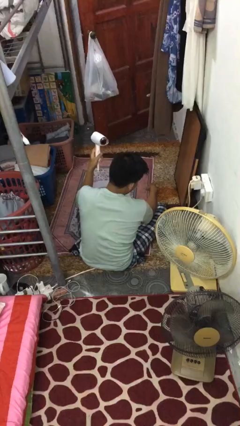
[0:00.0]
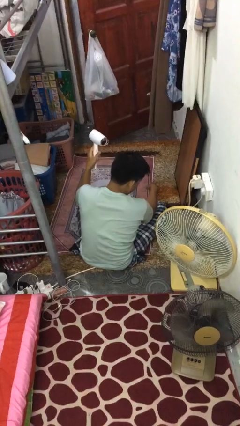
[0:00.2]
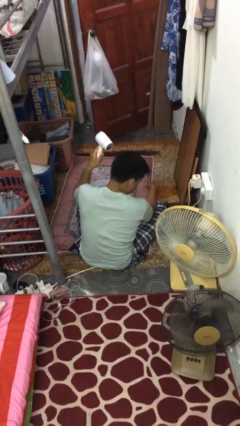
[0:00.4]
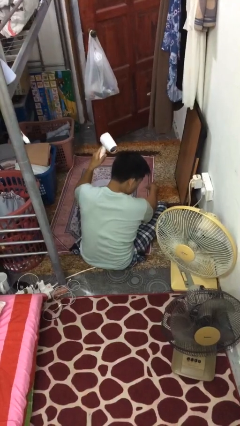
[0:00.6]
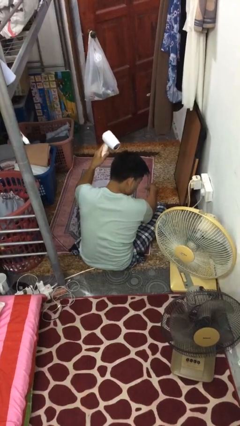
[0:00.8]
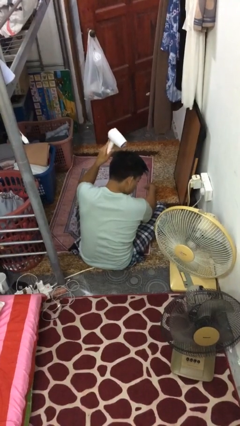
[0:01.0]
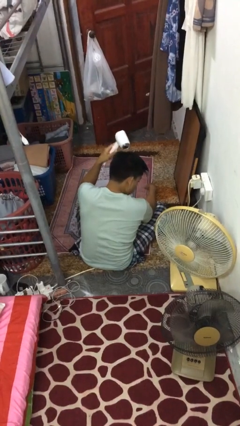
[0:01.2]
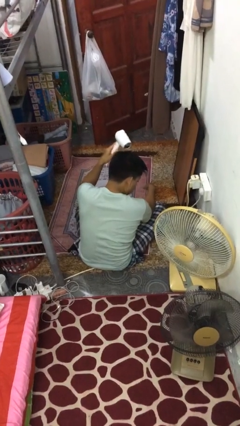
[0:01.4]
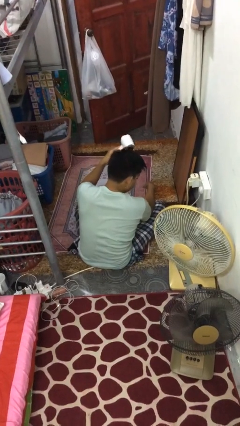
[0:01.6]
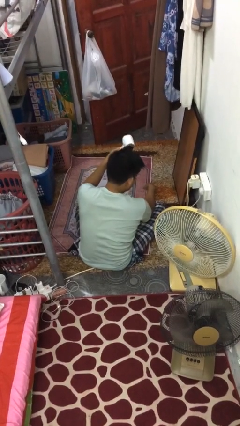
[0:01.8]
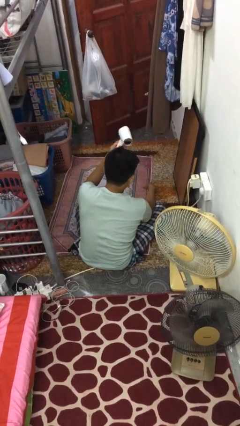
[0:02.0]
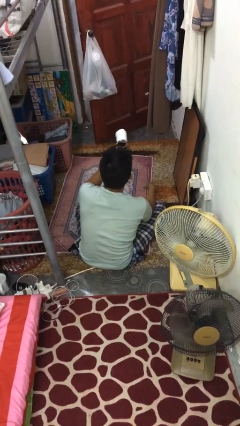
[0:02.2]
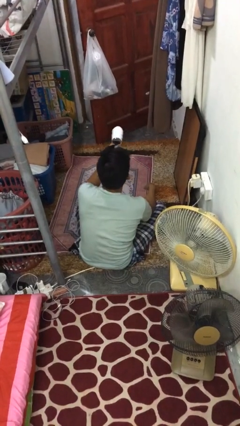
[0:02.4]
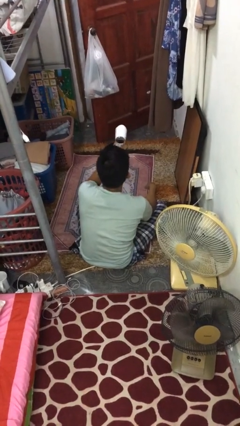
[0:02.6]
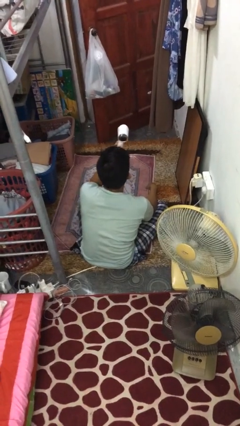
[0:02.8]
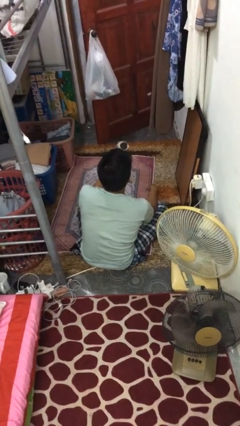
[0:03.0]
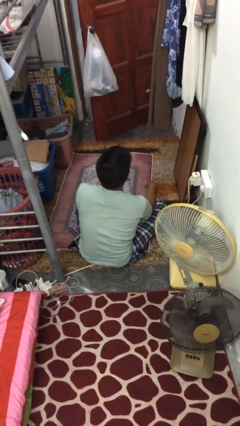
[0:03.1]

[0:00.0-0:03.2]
person dries hair with hairdryer

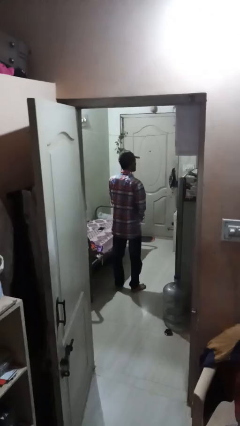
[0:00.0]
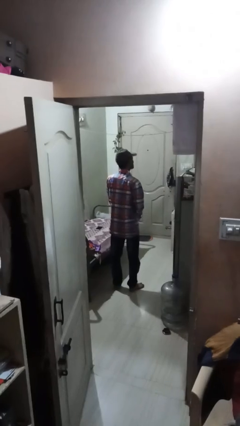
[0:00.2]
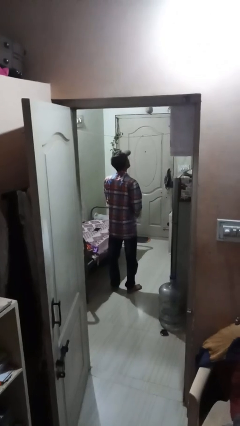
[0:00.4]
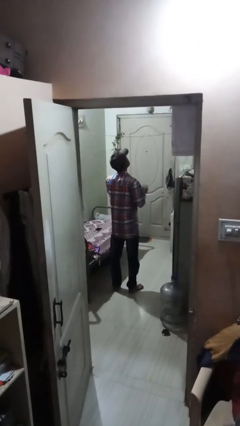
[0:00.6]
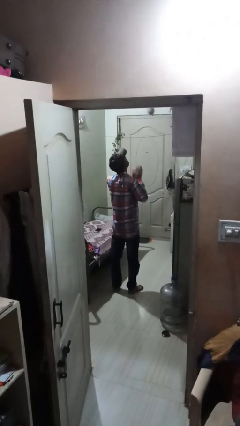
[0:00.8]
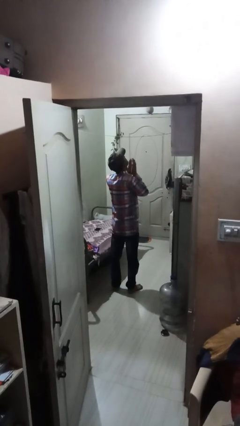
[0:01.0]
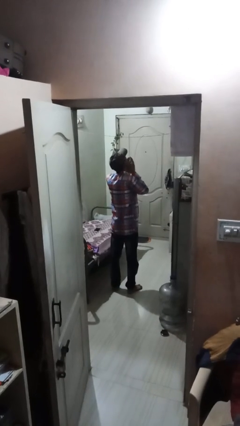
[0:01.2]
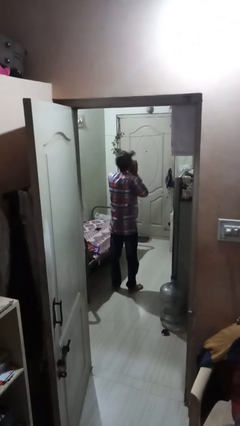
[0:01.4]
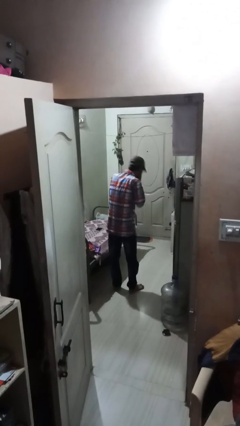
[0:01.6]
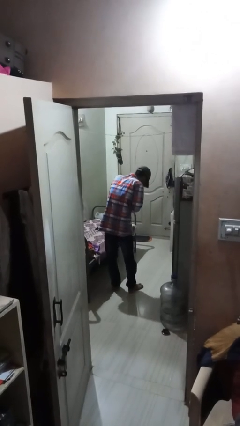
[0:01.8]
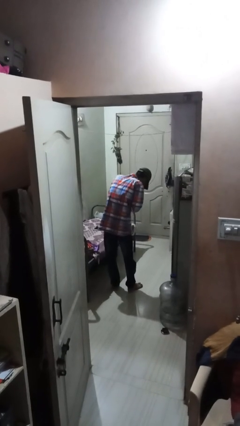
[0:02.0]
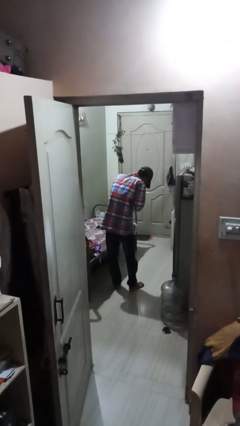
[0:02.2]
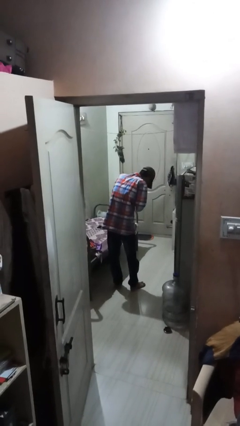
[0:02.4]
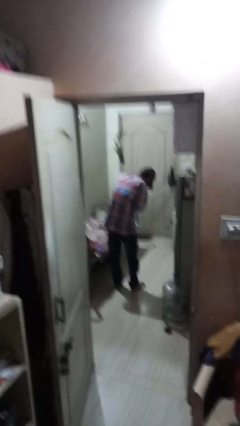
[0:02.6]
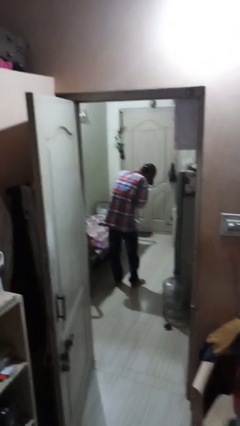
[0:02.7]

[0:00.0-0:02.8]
person sneezes into hand

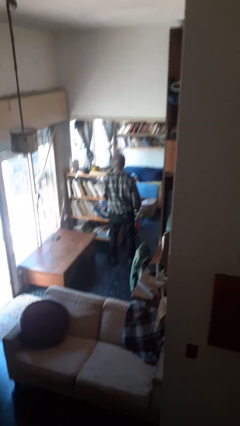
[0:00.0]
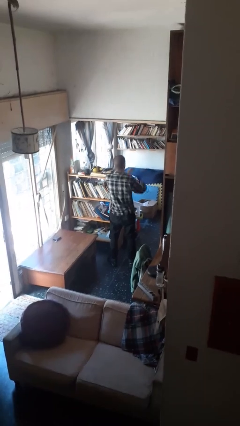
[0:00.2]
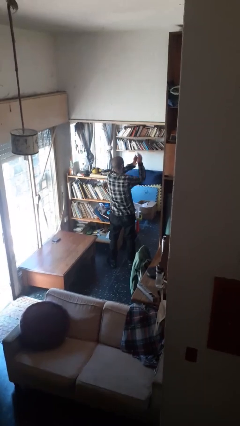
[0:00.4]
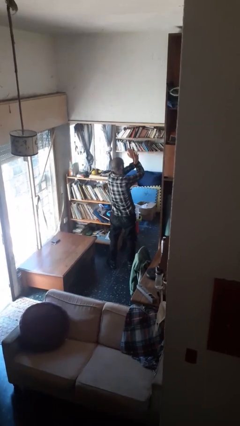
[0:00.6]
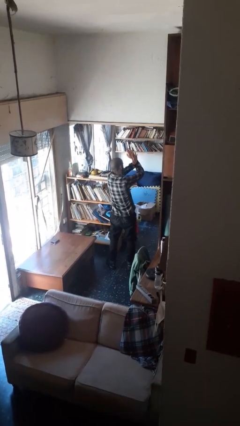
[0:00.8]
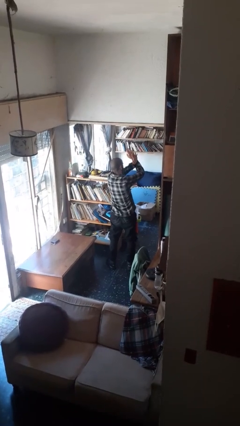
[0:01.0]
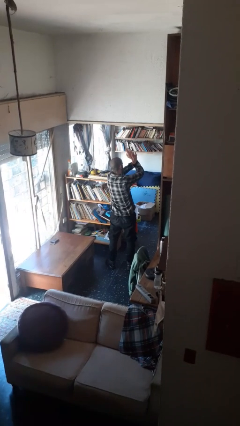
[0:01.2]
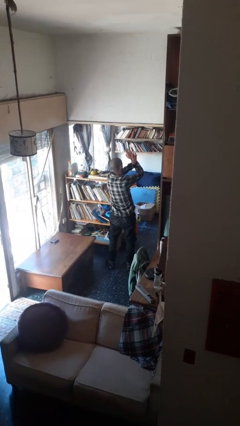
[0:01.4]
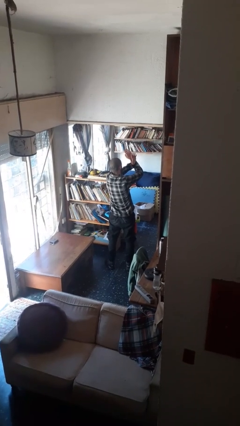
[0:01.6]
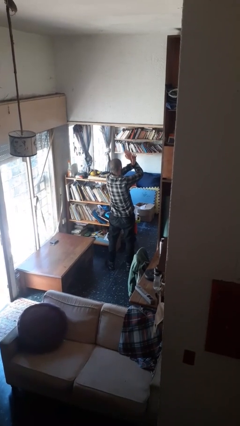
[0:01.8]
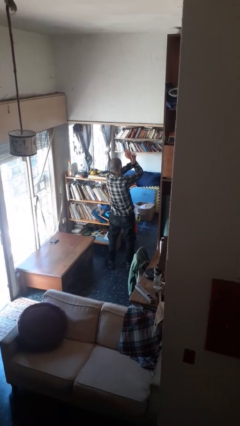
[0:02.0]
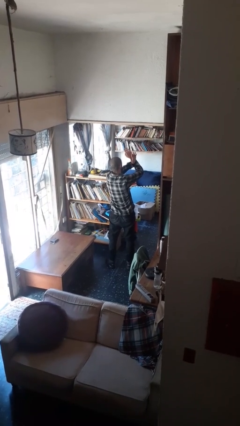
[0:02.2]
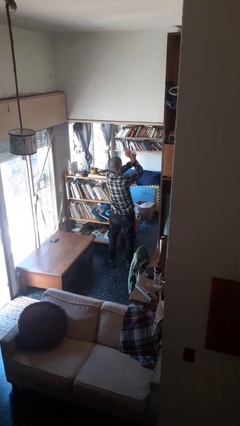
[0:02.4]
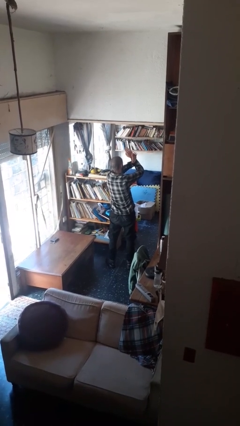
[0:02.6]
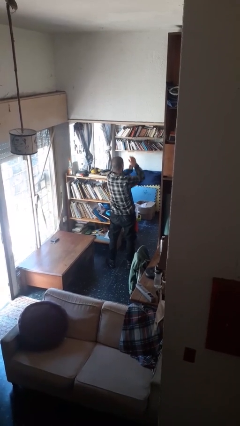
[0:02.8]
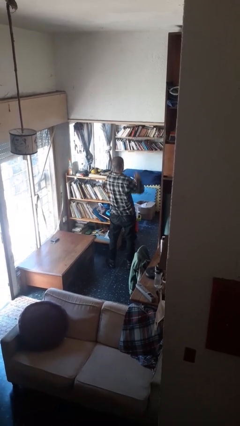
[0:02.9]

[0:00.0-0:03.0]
person gestures arms x

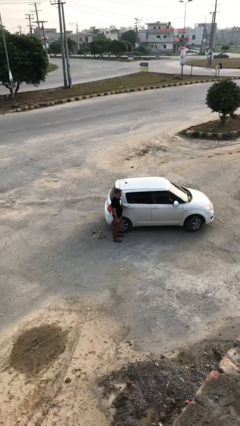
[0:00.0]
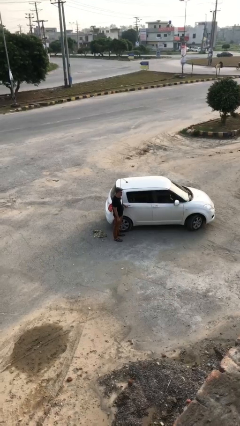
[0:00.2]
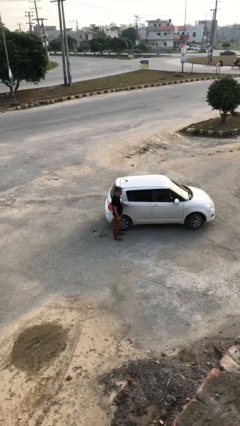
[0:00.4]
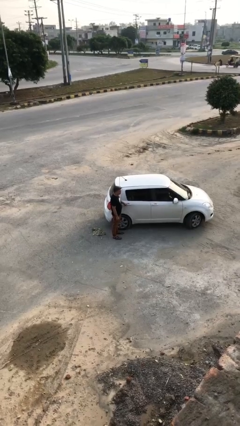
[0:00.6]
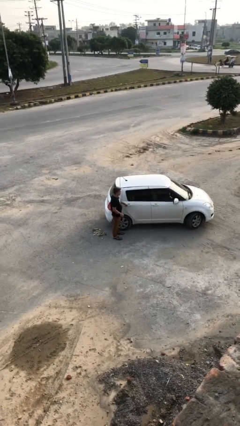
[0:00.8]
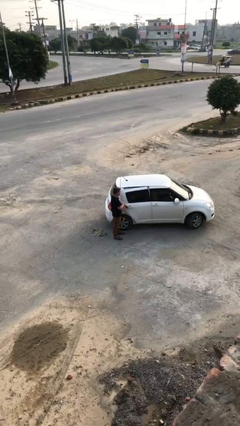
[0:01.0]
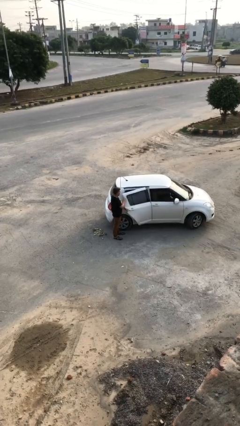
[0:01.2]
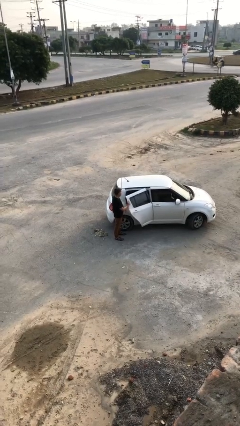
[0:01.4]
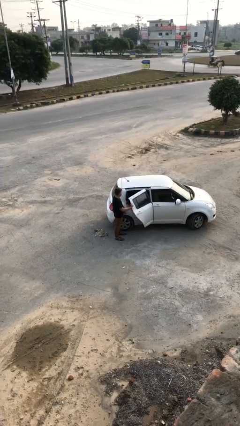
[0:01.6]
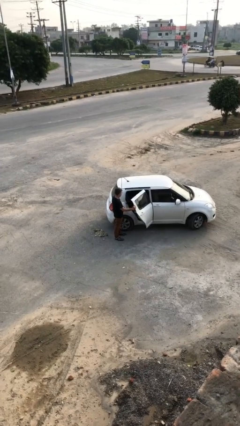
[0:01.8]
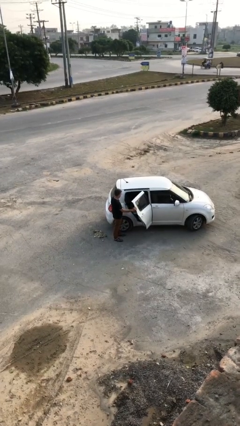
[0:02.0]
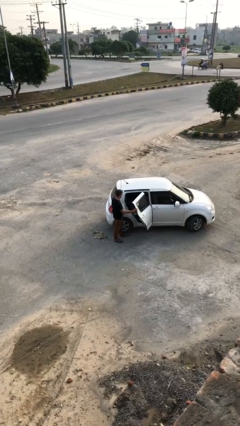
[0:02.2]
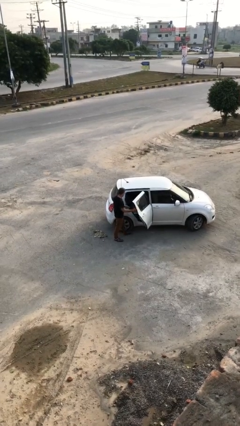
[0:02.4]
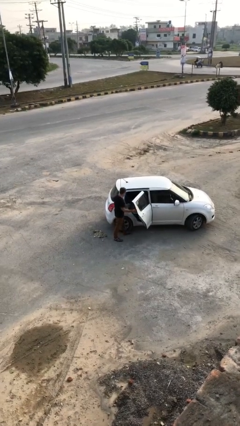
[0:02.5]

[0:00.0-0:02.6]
person opens car door

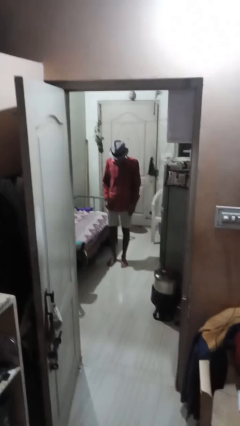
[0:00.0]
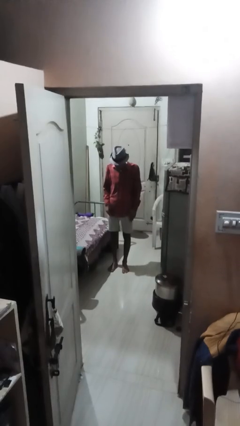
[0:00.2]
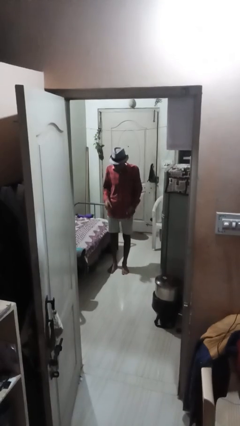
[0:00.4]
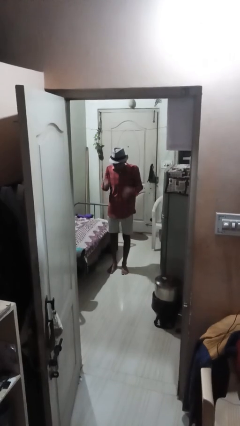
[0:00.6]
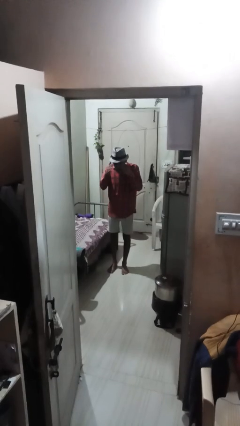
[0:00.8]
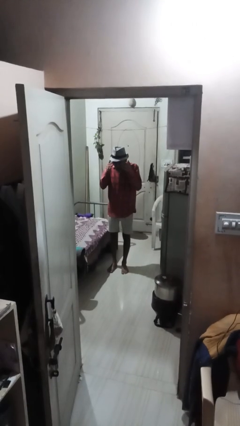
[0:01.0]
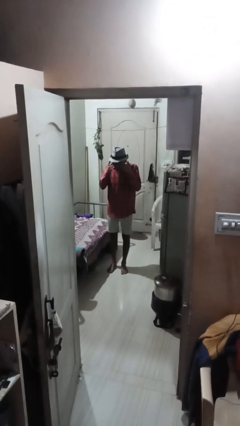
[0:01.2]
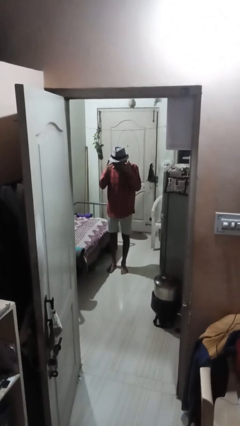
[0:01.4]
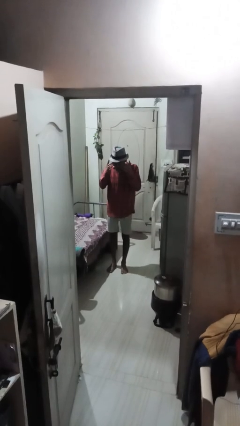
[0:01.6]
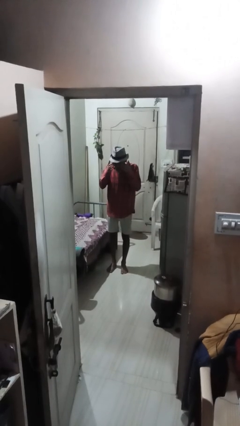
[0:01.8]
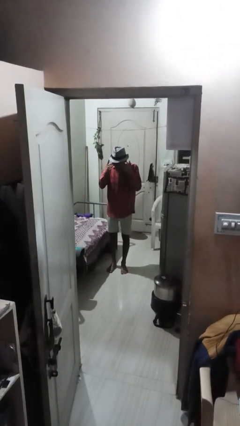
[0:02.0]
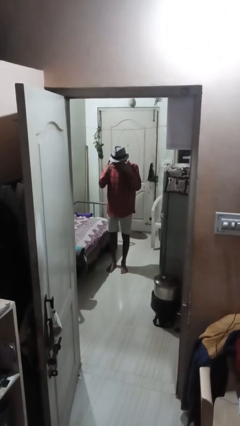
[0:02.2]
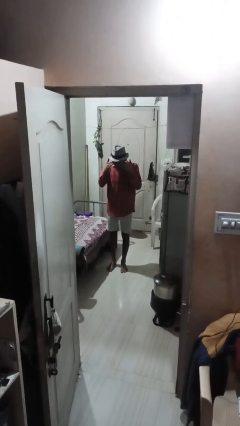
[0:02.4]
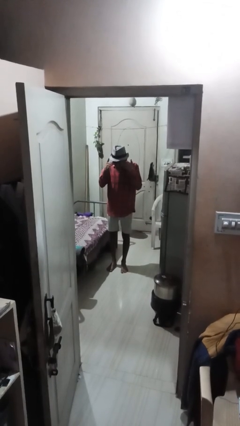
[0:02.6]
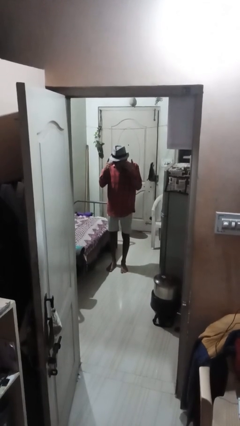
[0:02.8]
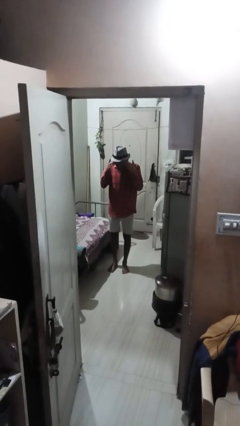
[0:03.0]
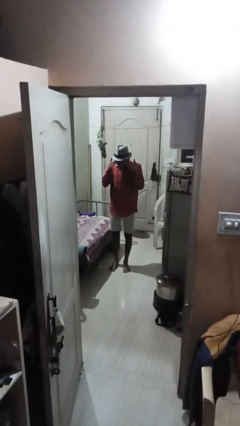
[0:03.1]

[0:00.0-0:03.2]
person rubs eyes

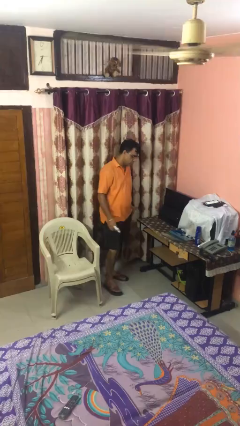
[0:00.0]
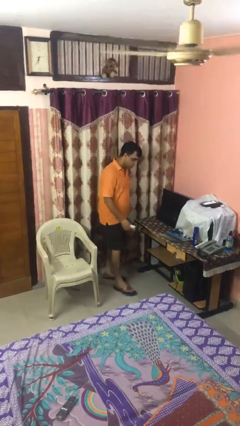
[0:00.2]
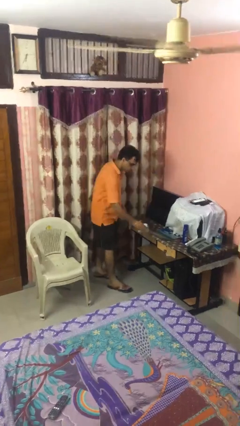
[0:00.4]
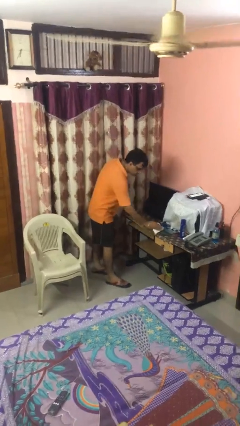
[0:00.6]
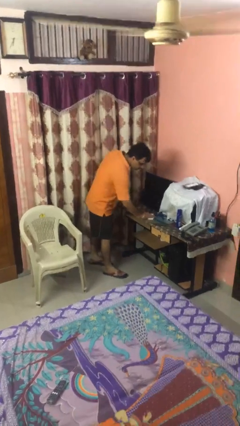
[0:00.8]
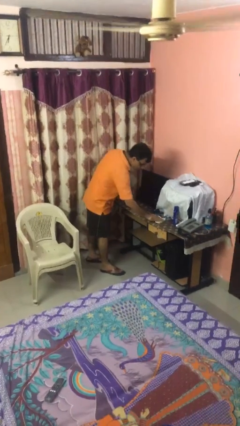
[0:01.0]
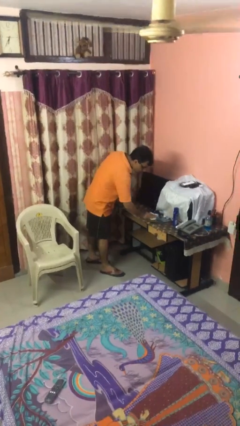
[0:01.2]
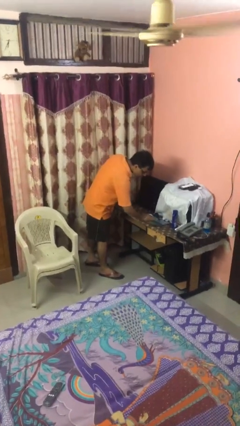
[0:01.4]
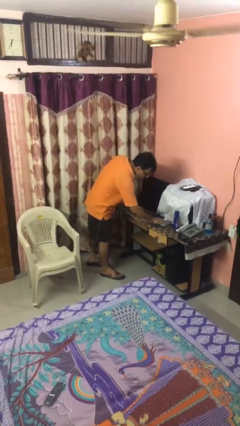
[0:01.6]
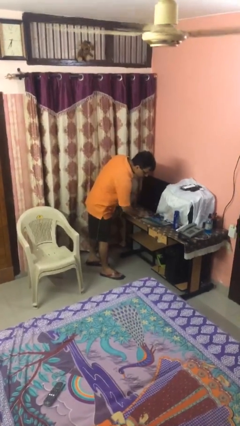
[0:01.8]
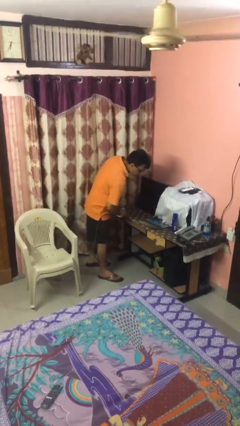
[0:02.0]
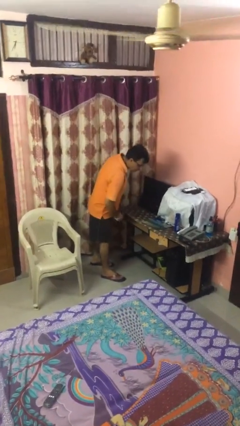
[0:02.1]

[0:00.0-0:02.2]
person cleans table with rag

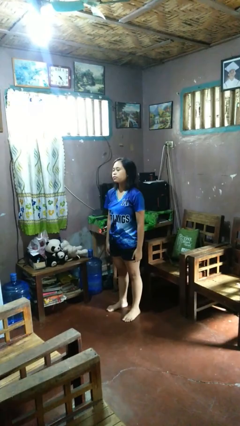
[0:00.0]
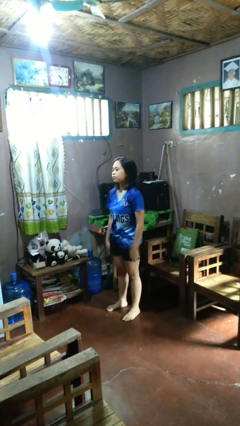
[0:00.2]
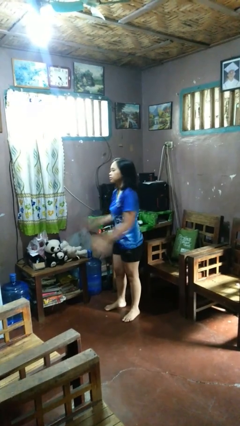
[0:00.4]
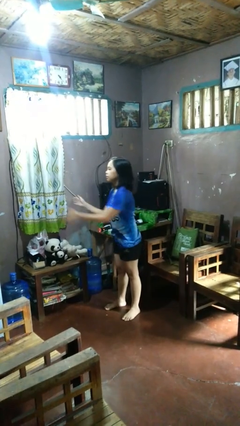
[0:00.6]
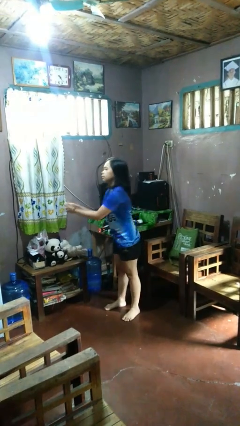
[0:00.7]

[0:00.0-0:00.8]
person claps hands
